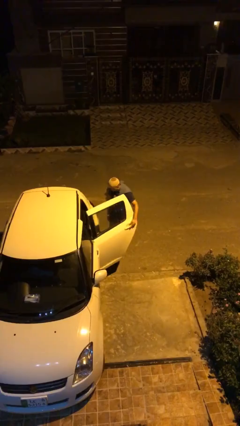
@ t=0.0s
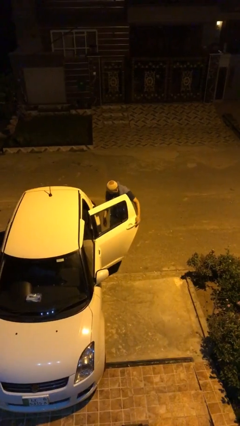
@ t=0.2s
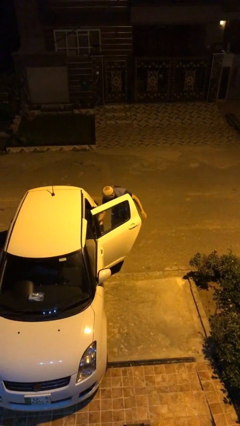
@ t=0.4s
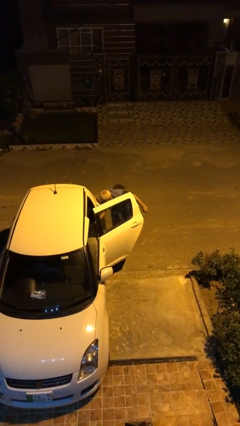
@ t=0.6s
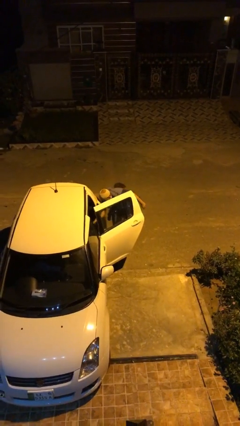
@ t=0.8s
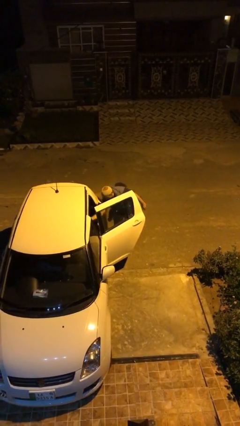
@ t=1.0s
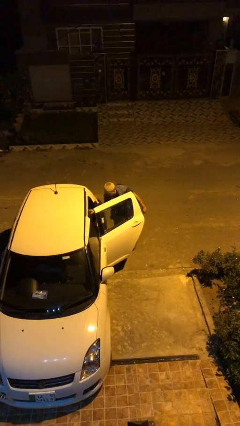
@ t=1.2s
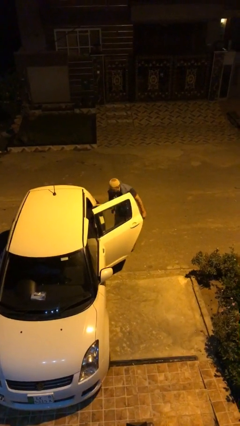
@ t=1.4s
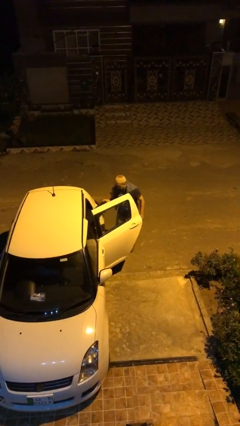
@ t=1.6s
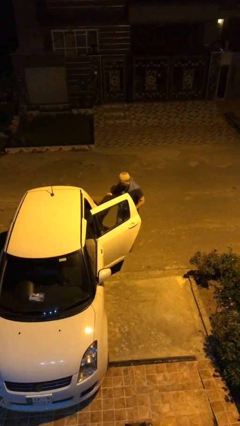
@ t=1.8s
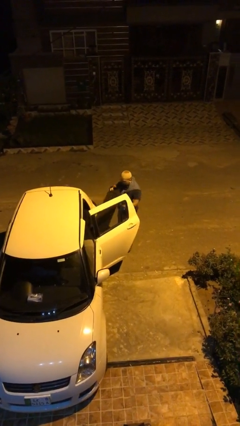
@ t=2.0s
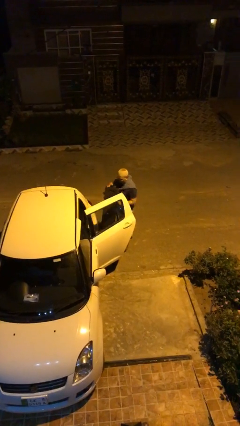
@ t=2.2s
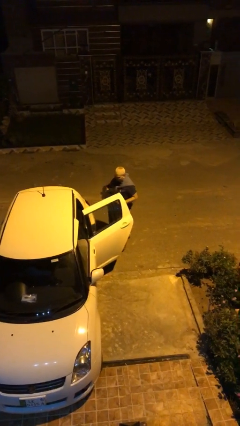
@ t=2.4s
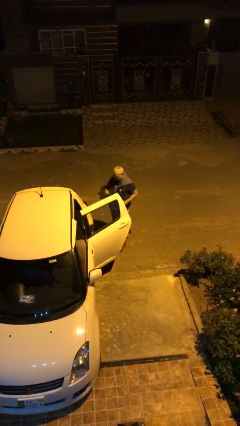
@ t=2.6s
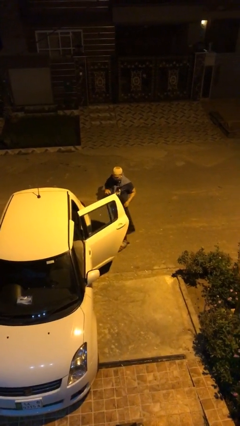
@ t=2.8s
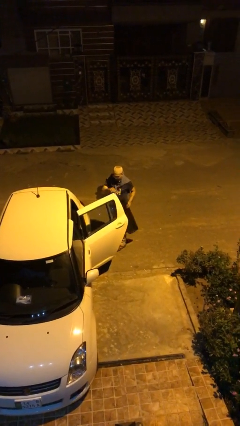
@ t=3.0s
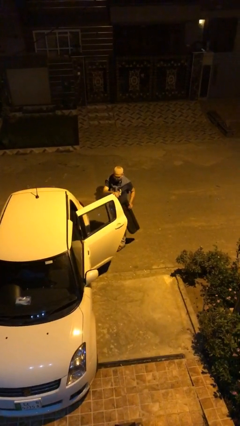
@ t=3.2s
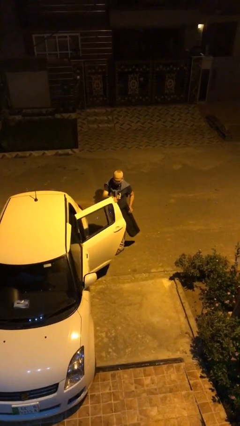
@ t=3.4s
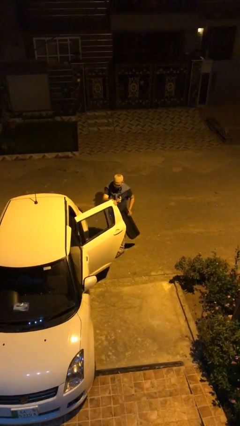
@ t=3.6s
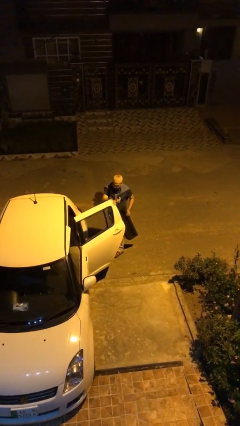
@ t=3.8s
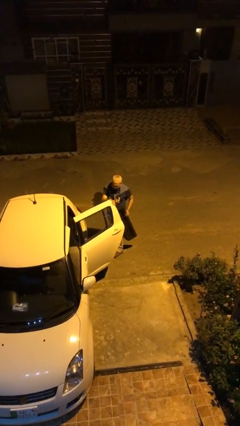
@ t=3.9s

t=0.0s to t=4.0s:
person unloads car

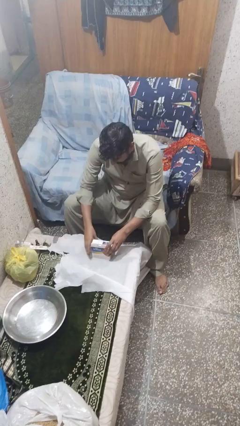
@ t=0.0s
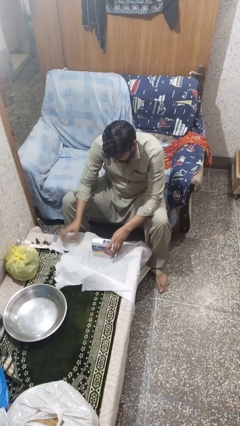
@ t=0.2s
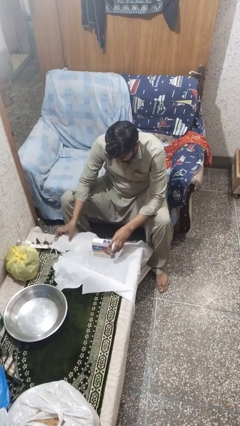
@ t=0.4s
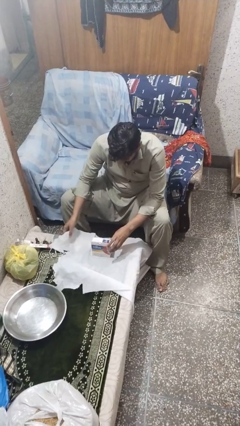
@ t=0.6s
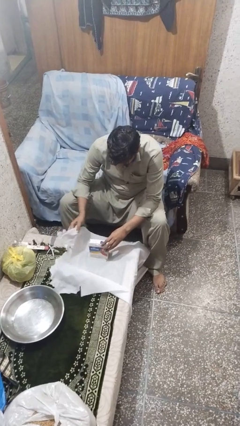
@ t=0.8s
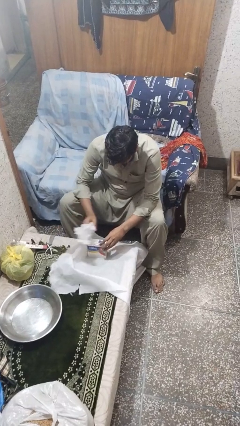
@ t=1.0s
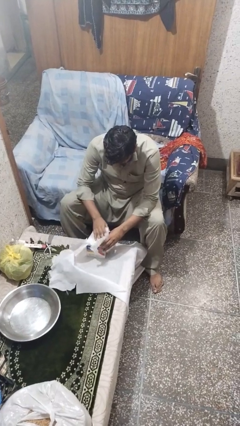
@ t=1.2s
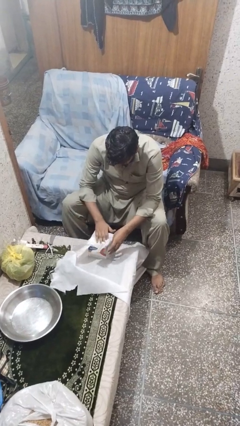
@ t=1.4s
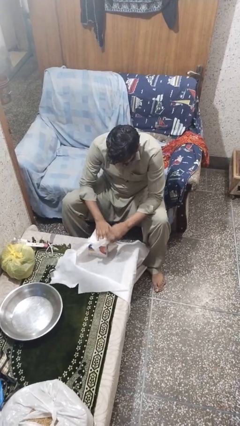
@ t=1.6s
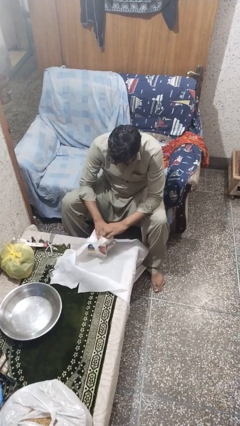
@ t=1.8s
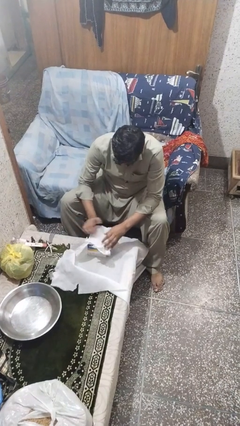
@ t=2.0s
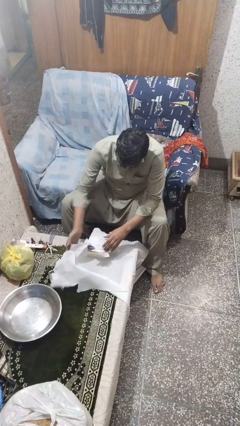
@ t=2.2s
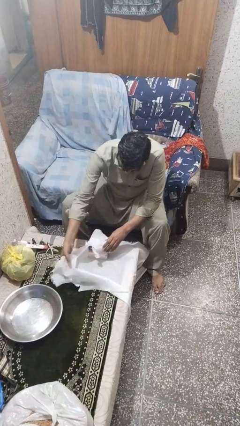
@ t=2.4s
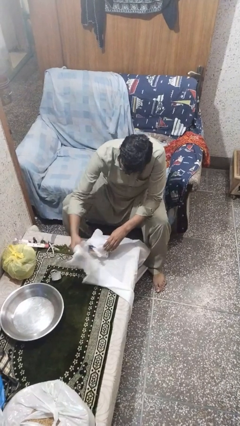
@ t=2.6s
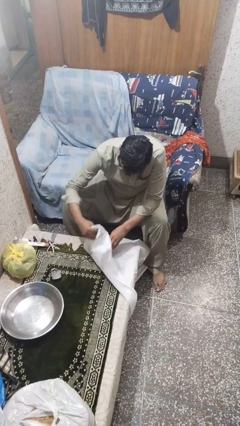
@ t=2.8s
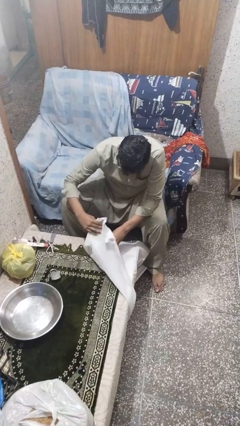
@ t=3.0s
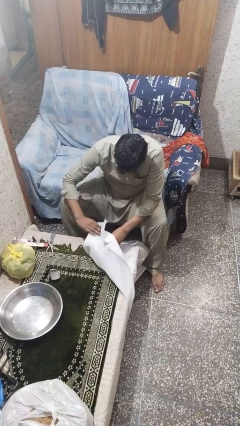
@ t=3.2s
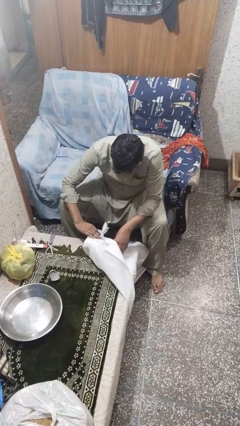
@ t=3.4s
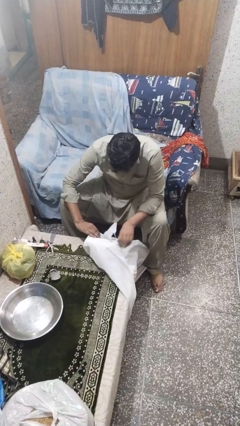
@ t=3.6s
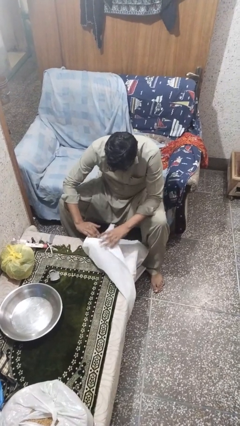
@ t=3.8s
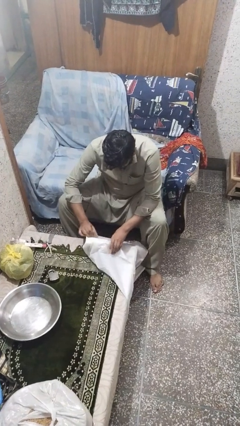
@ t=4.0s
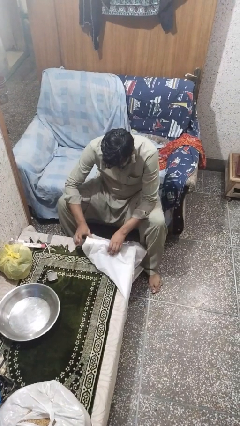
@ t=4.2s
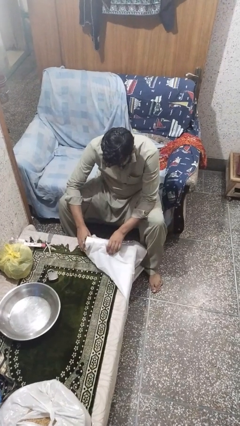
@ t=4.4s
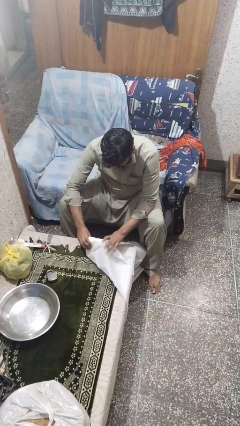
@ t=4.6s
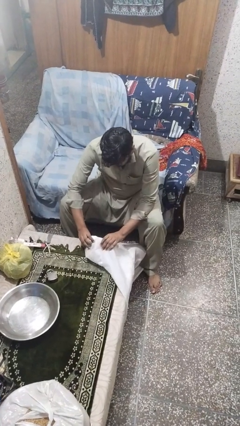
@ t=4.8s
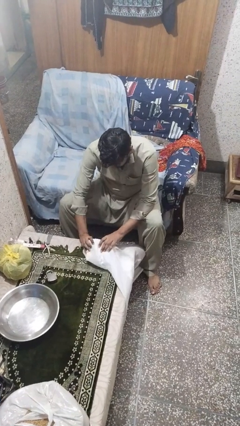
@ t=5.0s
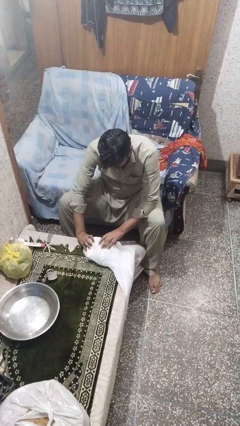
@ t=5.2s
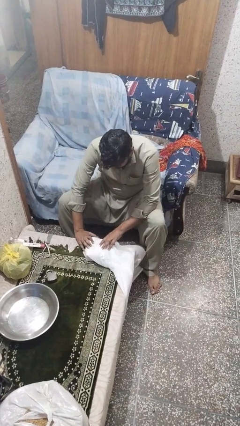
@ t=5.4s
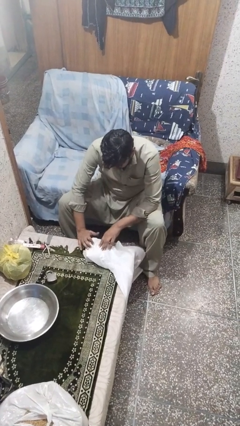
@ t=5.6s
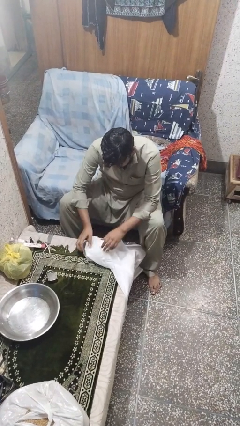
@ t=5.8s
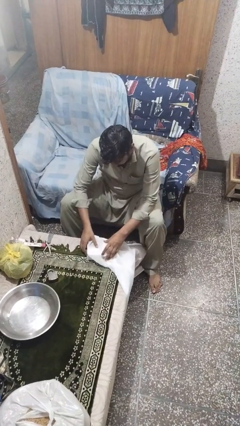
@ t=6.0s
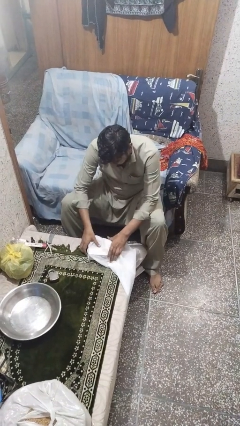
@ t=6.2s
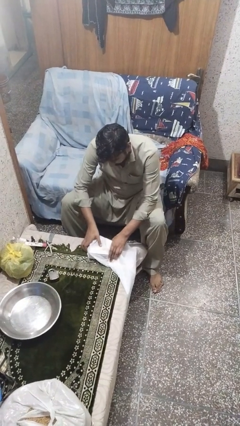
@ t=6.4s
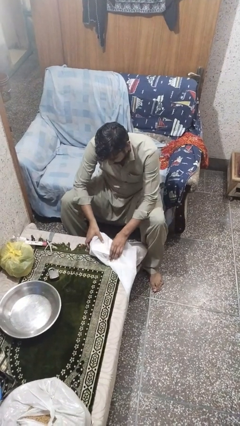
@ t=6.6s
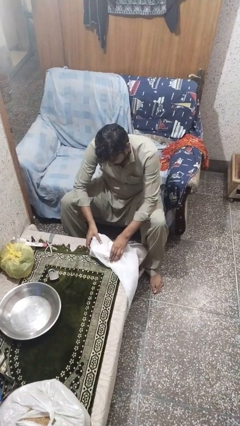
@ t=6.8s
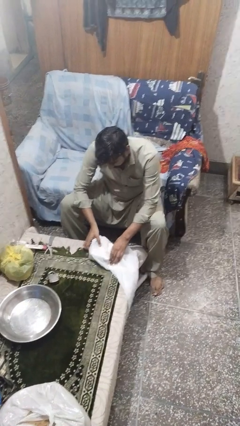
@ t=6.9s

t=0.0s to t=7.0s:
person wraps box

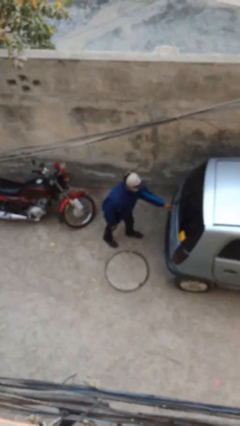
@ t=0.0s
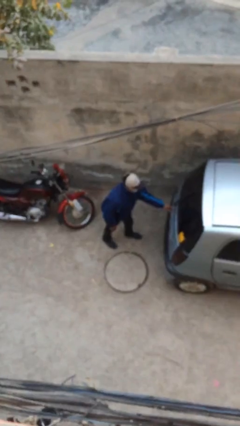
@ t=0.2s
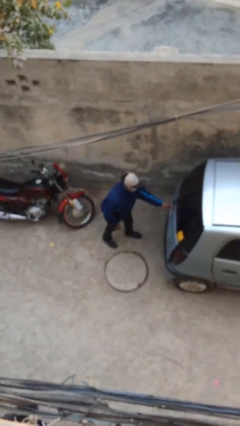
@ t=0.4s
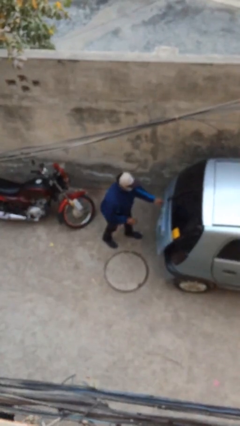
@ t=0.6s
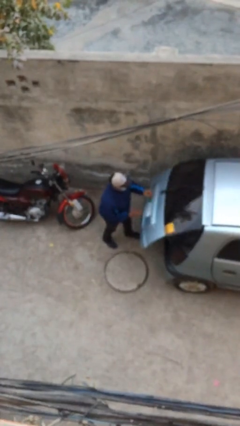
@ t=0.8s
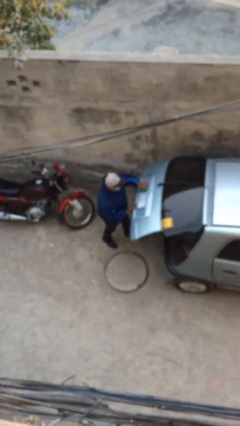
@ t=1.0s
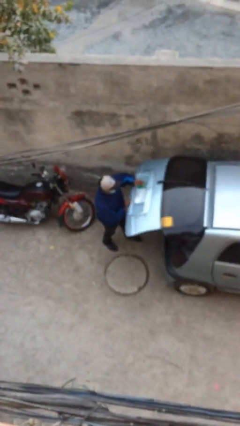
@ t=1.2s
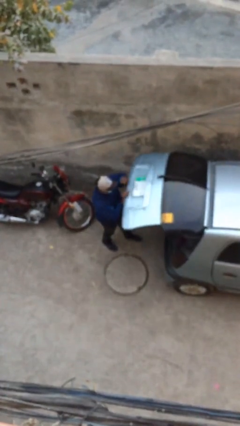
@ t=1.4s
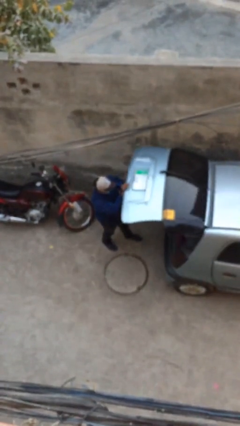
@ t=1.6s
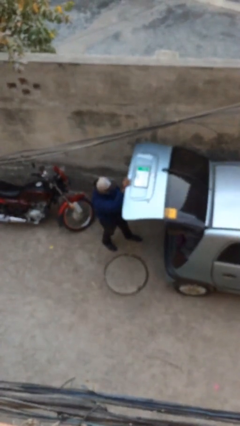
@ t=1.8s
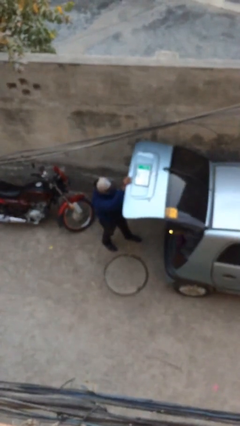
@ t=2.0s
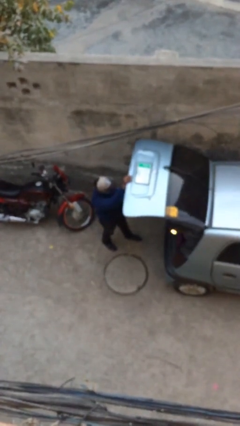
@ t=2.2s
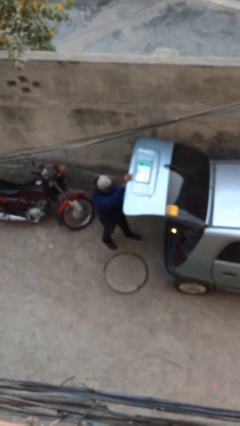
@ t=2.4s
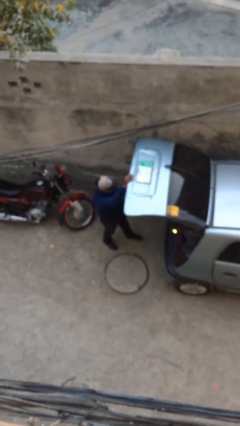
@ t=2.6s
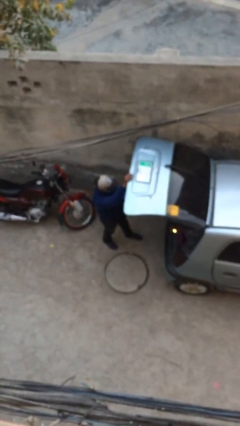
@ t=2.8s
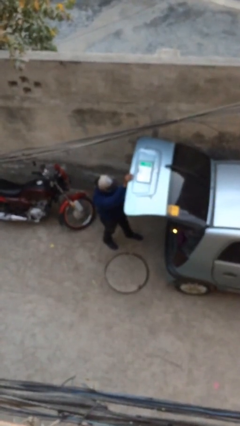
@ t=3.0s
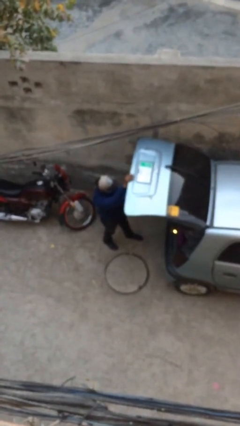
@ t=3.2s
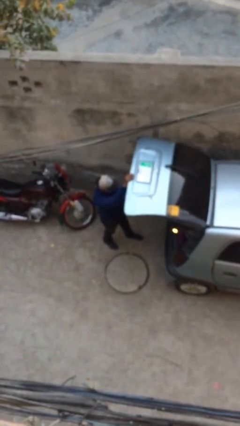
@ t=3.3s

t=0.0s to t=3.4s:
person opens car trunk

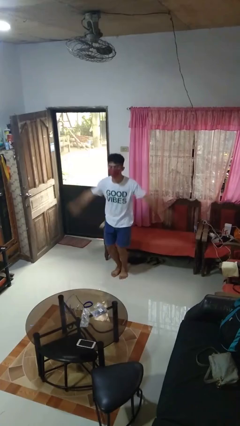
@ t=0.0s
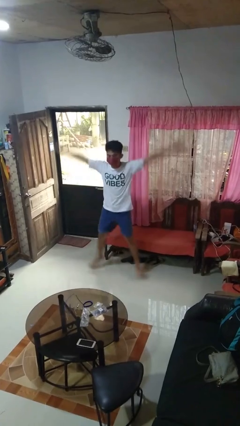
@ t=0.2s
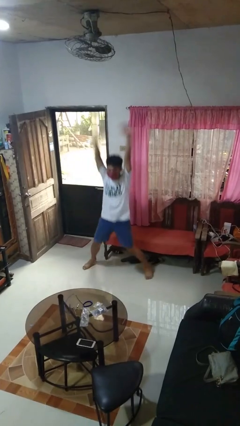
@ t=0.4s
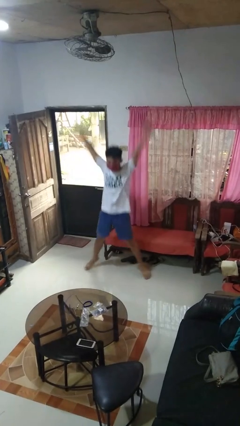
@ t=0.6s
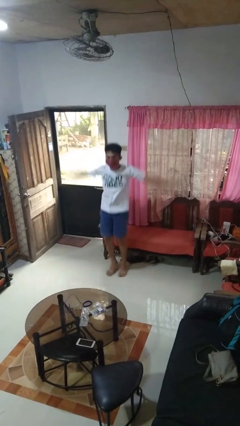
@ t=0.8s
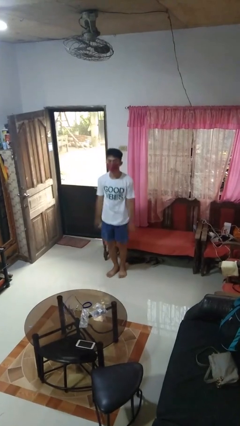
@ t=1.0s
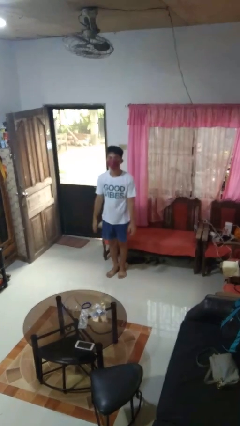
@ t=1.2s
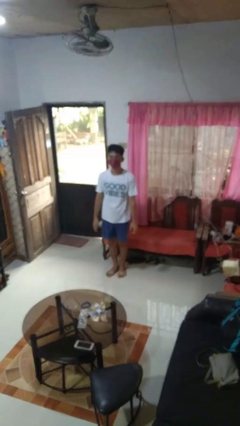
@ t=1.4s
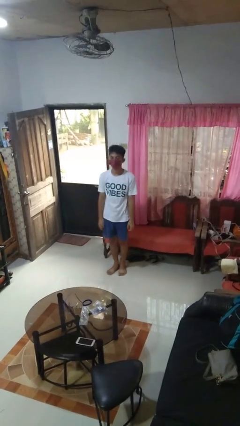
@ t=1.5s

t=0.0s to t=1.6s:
person exercises with jumping jacks

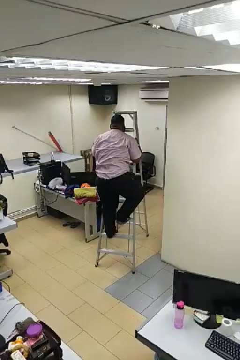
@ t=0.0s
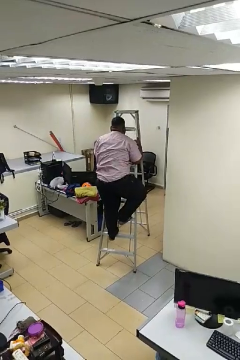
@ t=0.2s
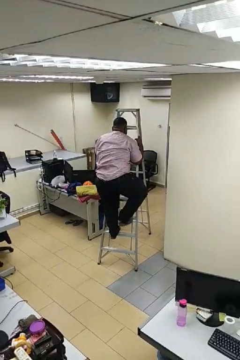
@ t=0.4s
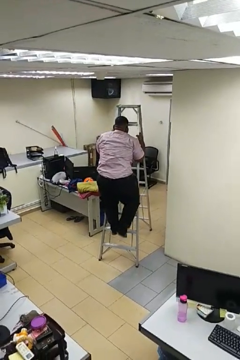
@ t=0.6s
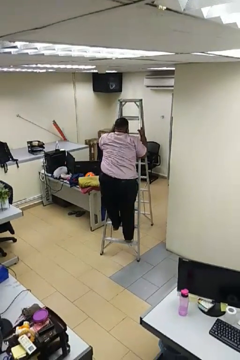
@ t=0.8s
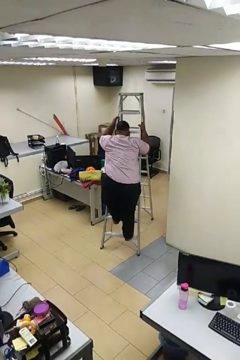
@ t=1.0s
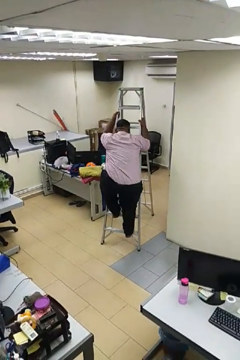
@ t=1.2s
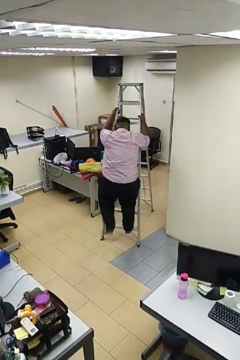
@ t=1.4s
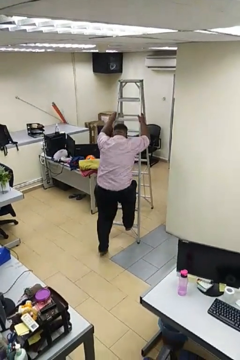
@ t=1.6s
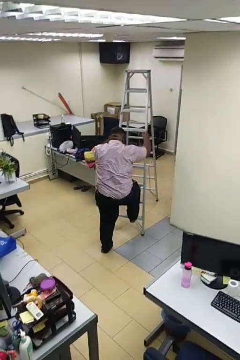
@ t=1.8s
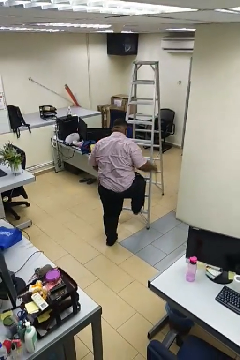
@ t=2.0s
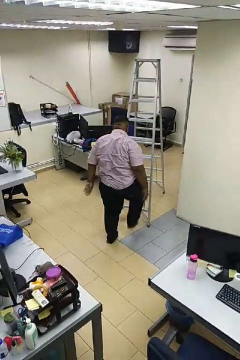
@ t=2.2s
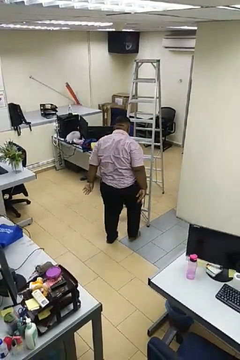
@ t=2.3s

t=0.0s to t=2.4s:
person climbs down ladder
